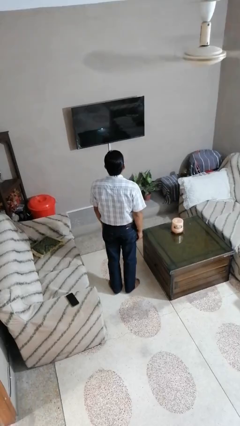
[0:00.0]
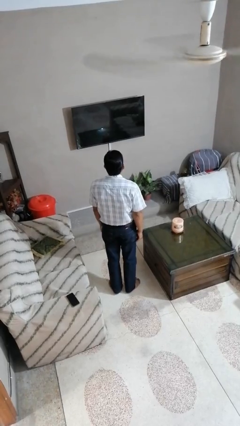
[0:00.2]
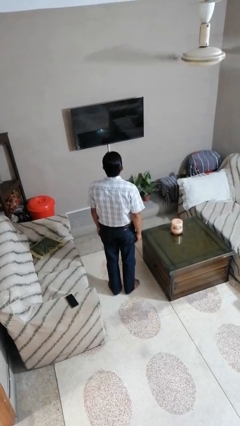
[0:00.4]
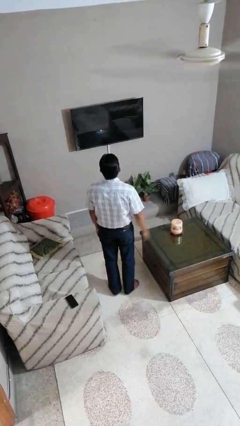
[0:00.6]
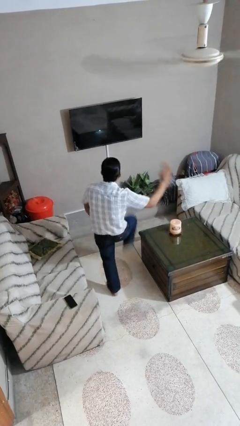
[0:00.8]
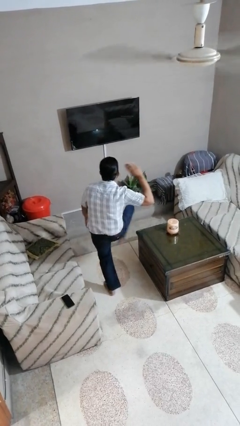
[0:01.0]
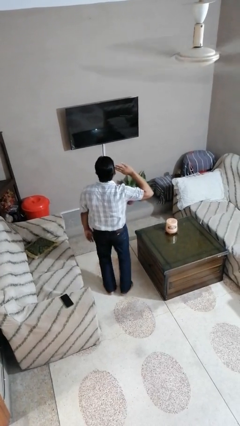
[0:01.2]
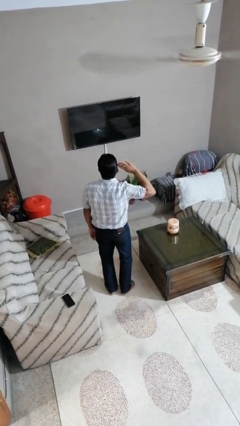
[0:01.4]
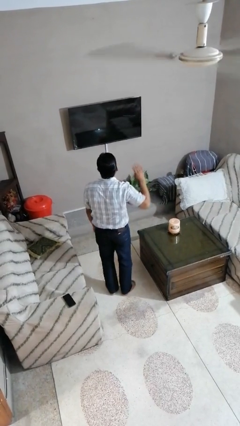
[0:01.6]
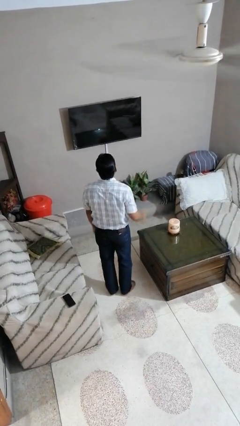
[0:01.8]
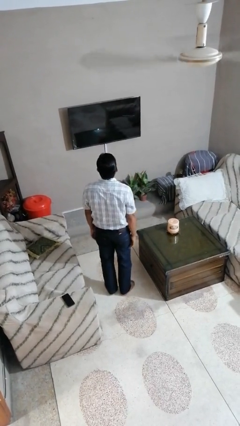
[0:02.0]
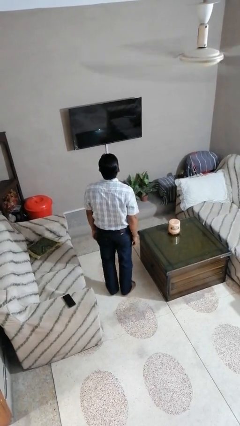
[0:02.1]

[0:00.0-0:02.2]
person salutes

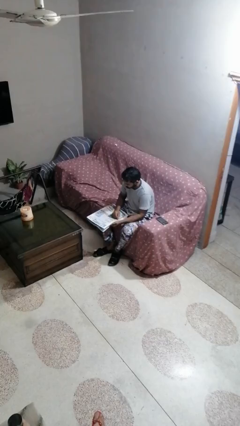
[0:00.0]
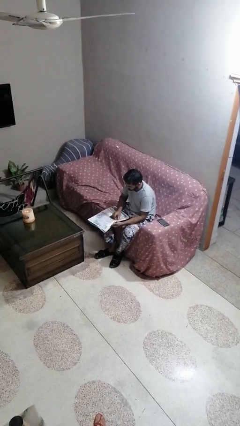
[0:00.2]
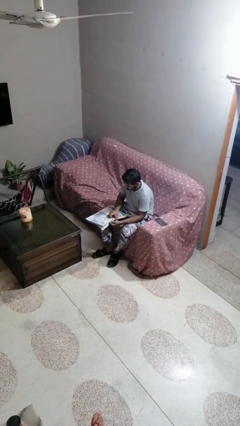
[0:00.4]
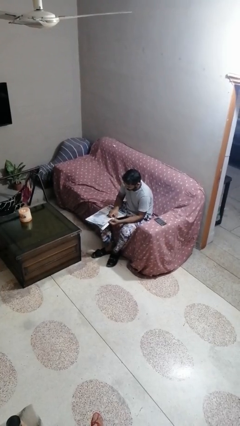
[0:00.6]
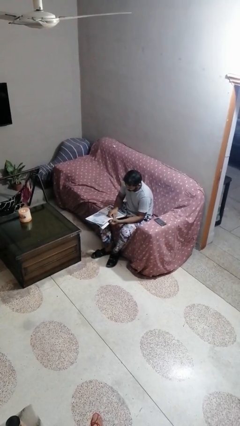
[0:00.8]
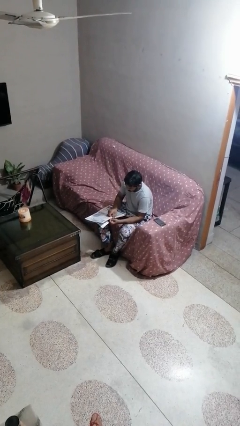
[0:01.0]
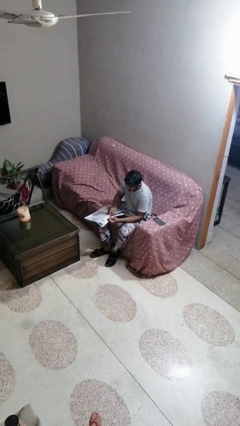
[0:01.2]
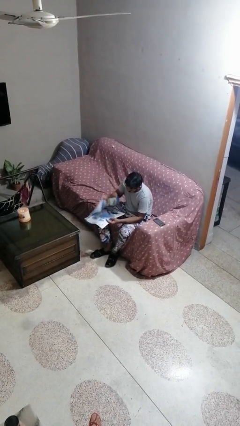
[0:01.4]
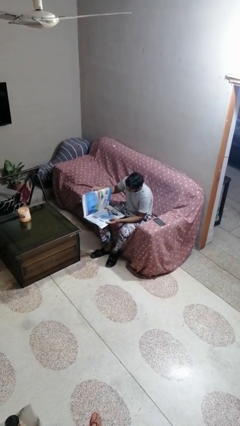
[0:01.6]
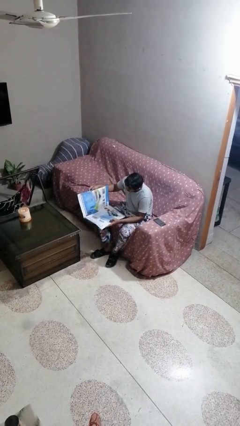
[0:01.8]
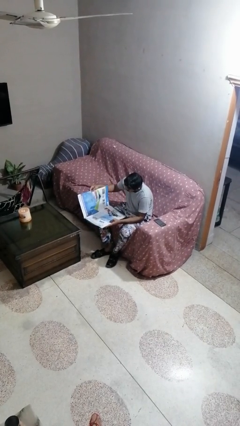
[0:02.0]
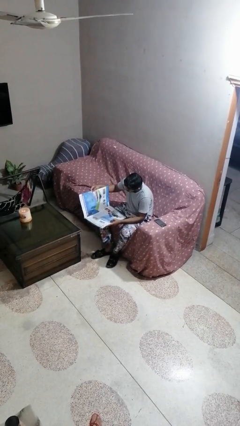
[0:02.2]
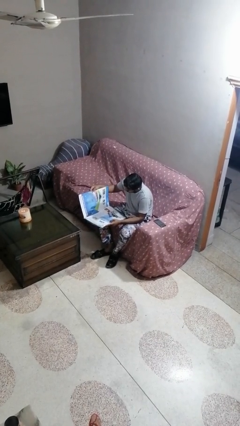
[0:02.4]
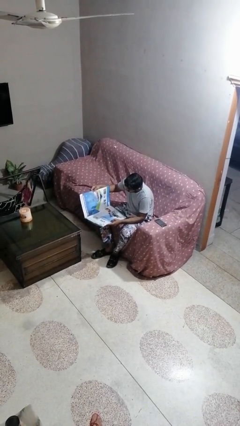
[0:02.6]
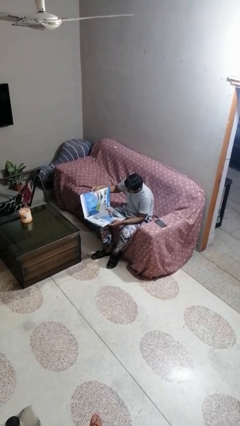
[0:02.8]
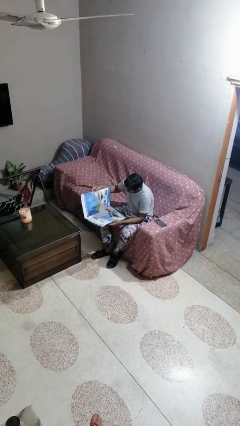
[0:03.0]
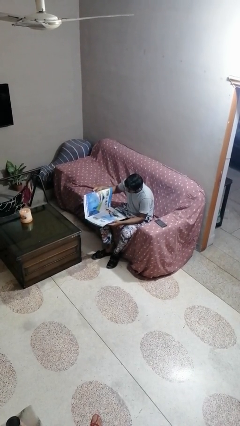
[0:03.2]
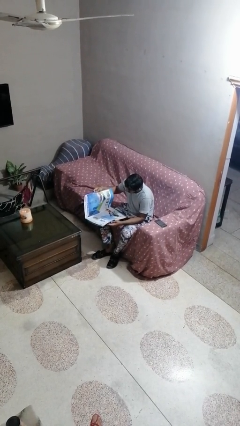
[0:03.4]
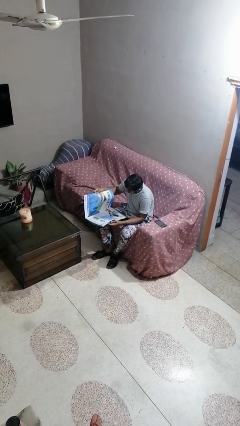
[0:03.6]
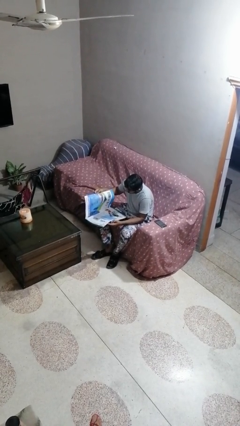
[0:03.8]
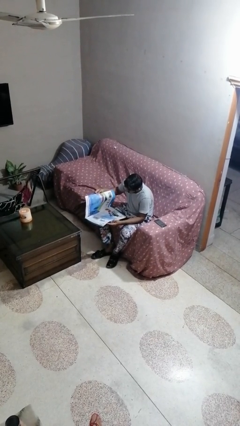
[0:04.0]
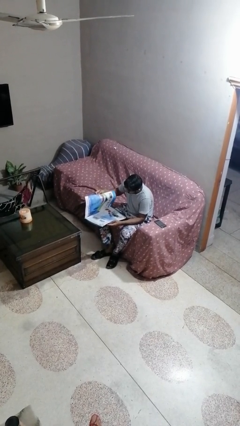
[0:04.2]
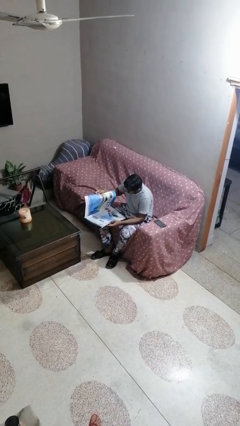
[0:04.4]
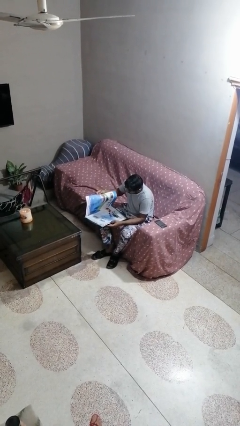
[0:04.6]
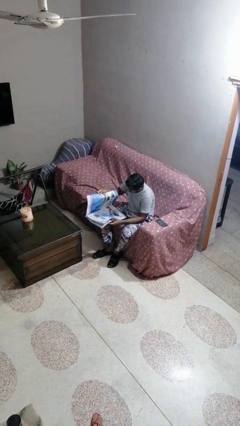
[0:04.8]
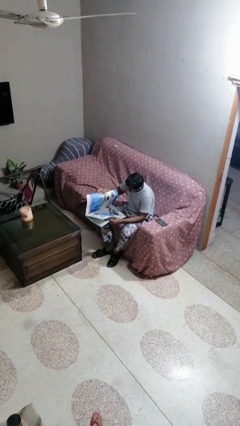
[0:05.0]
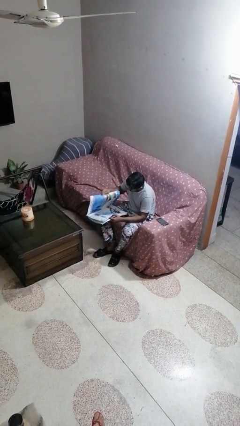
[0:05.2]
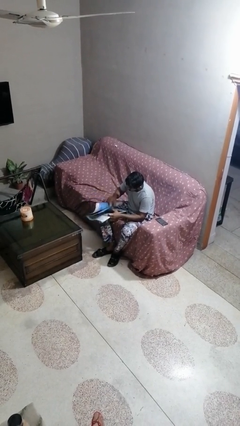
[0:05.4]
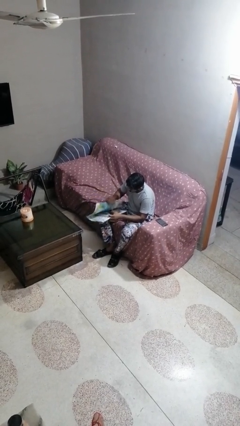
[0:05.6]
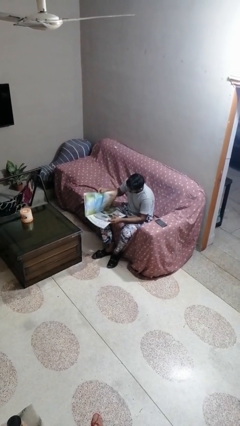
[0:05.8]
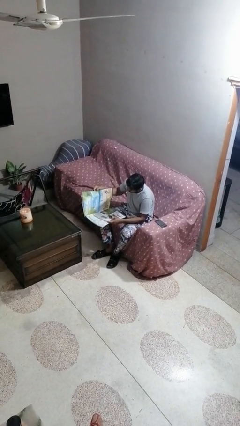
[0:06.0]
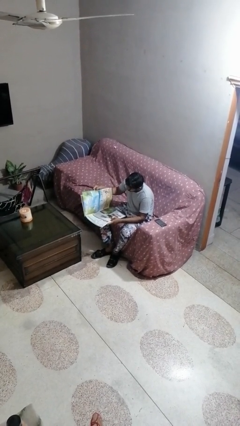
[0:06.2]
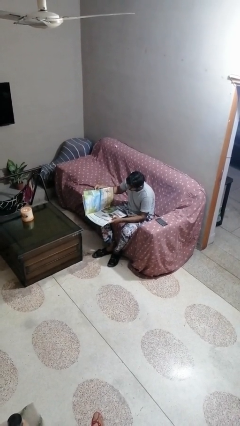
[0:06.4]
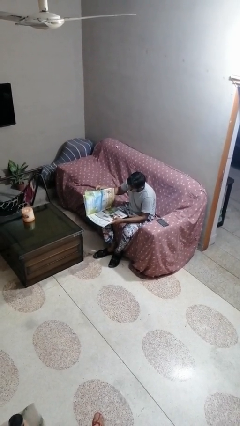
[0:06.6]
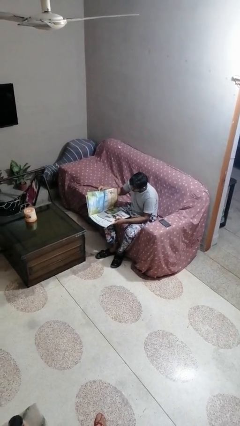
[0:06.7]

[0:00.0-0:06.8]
person reads magazine

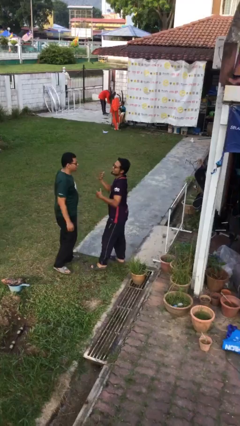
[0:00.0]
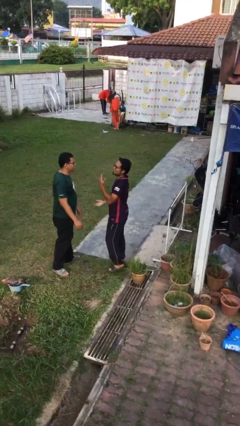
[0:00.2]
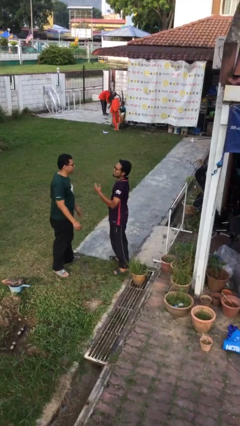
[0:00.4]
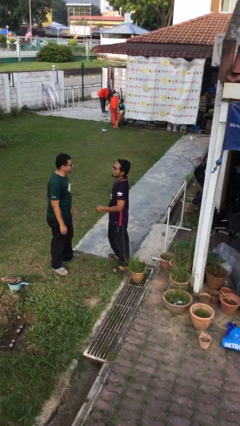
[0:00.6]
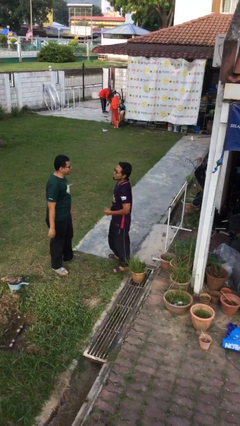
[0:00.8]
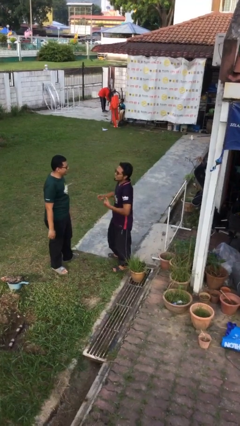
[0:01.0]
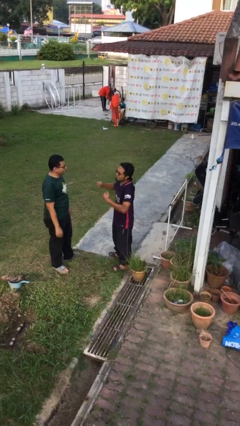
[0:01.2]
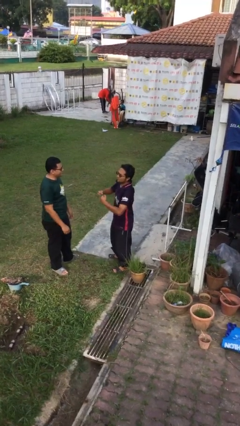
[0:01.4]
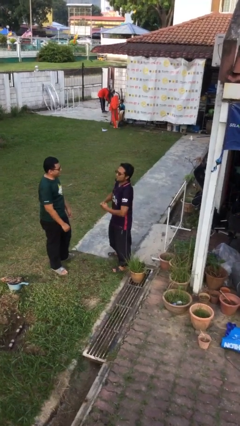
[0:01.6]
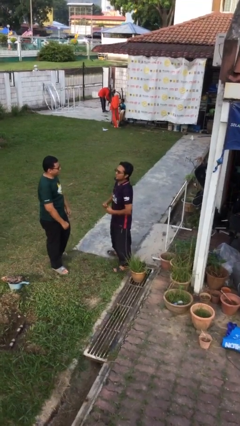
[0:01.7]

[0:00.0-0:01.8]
person talks to person

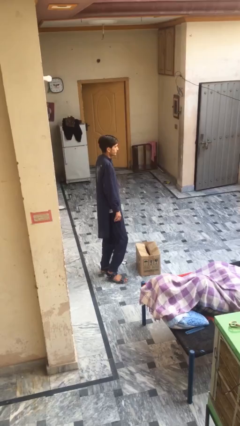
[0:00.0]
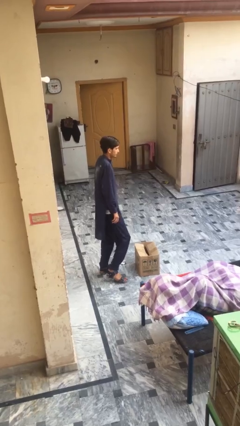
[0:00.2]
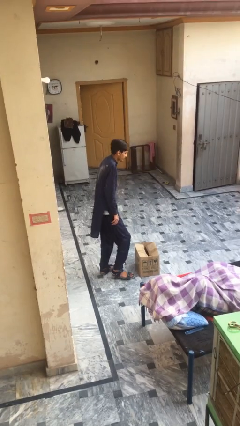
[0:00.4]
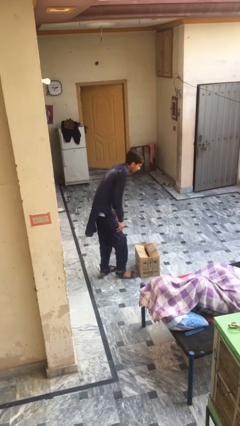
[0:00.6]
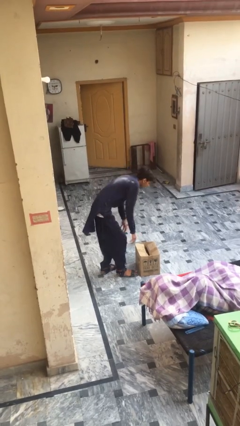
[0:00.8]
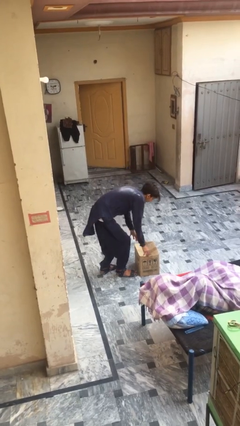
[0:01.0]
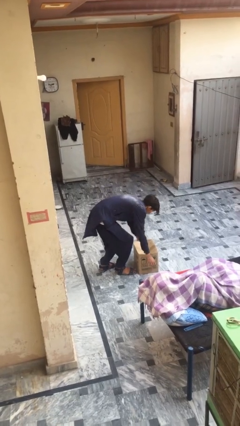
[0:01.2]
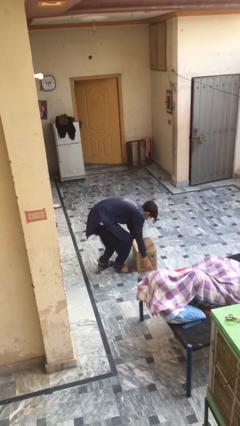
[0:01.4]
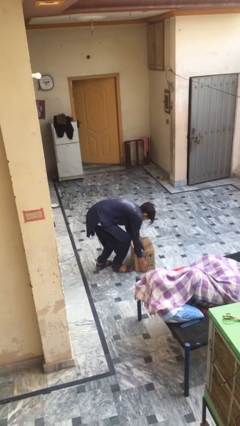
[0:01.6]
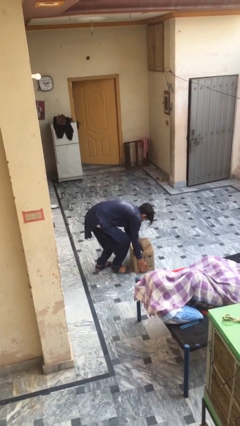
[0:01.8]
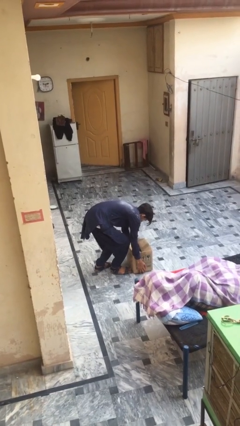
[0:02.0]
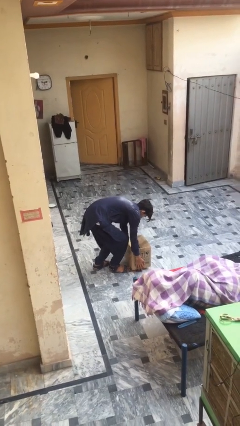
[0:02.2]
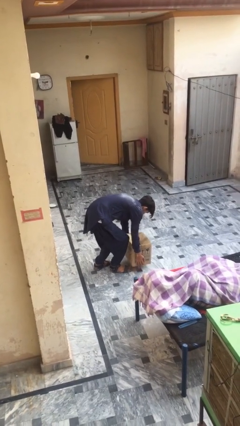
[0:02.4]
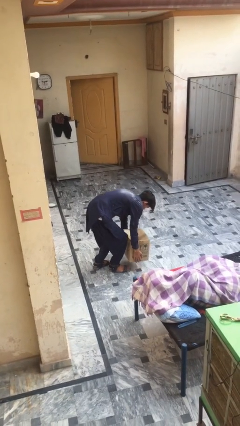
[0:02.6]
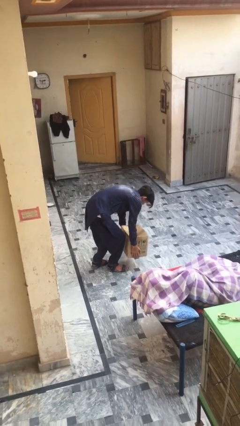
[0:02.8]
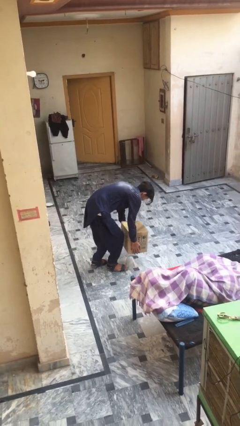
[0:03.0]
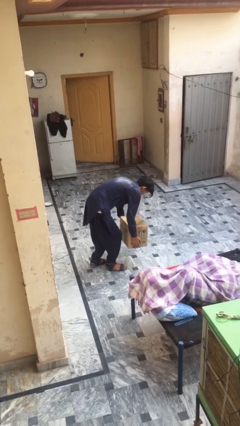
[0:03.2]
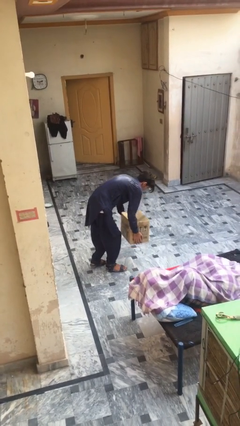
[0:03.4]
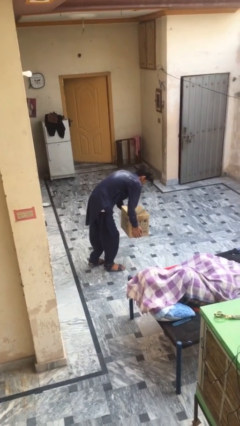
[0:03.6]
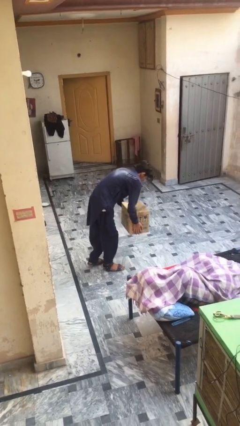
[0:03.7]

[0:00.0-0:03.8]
person picks up object from floor

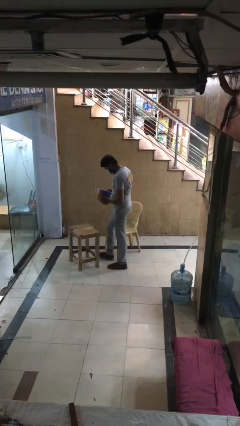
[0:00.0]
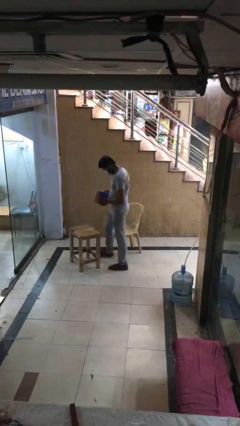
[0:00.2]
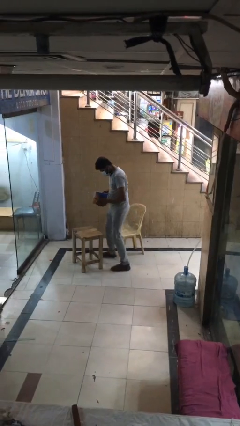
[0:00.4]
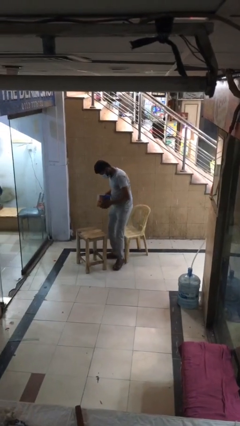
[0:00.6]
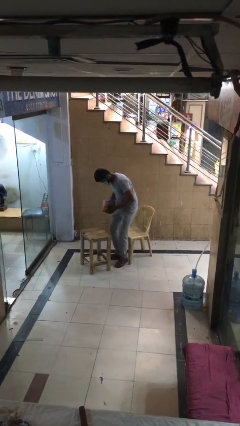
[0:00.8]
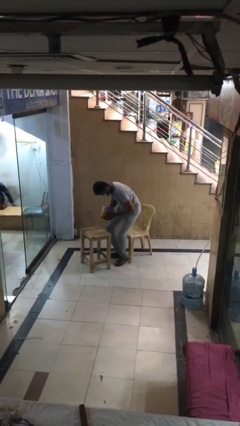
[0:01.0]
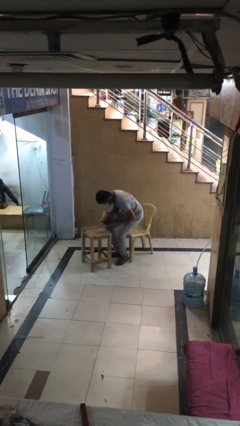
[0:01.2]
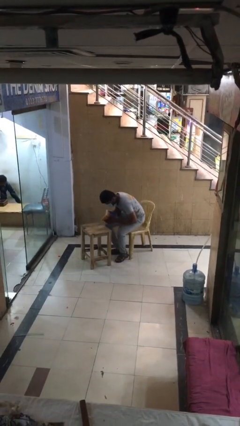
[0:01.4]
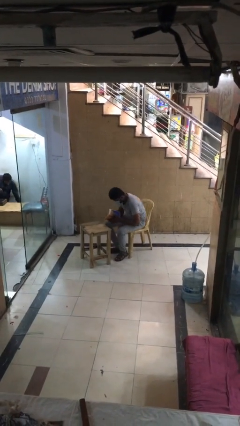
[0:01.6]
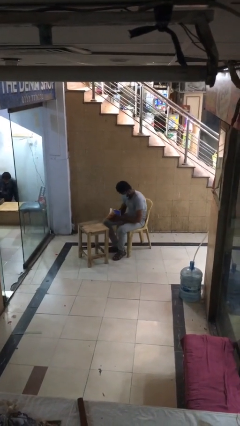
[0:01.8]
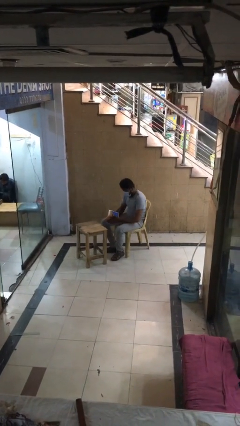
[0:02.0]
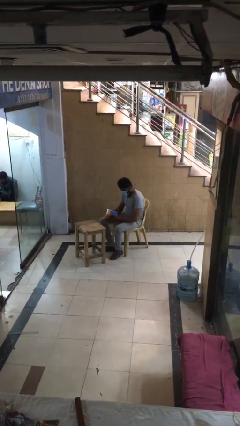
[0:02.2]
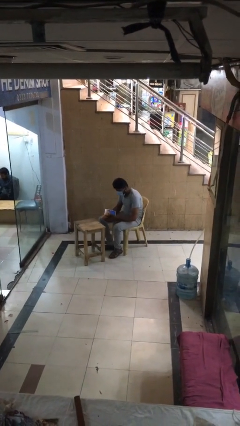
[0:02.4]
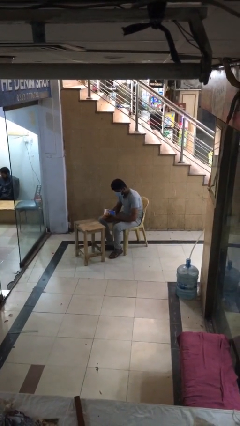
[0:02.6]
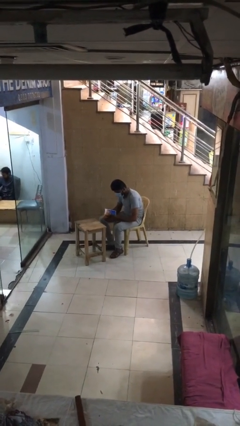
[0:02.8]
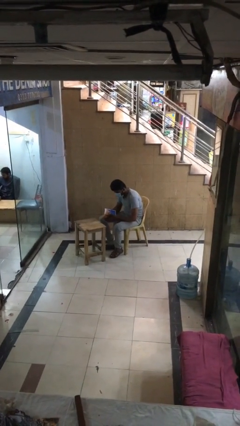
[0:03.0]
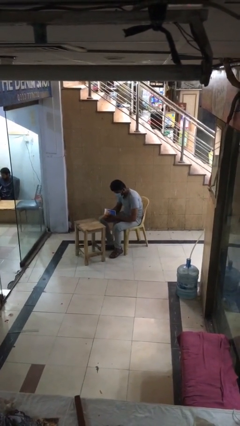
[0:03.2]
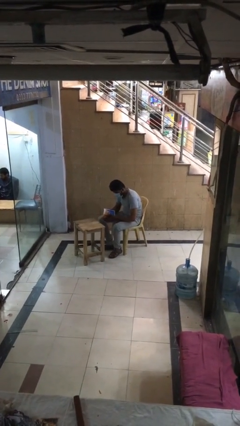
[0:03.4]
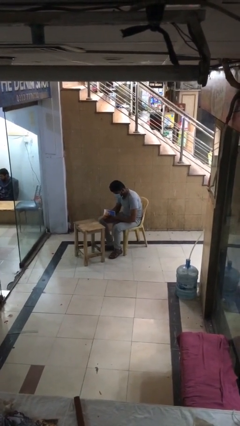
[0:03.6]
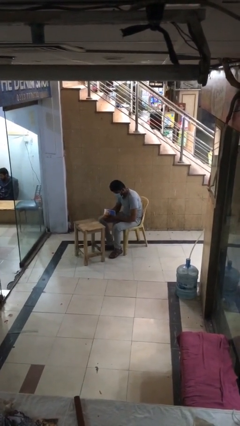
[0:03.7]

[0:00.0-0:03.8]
person sits down
